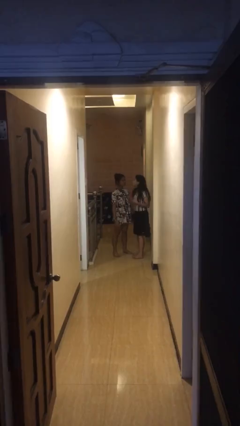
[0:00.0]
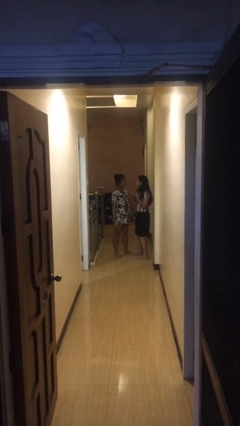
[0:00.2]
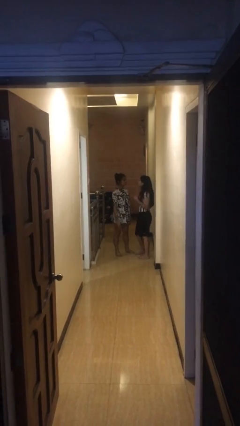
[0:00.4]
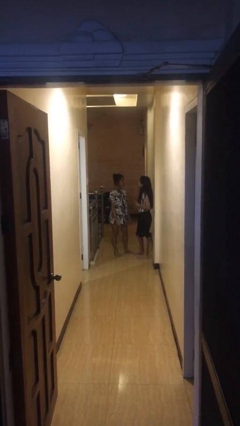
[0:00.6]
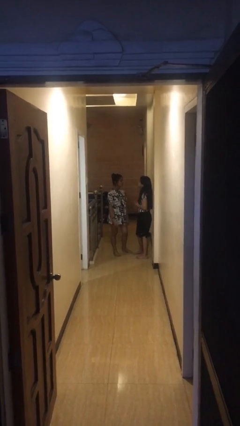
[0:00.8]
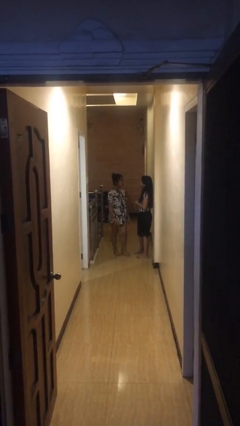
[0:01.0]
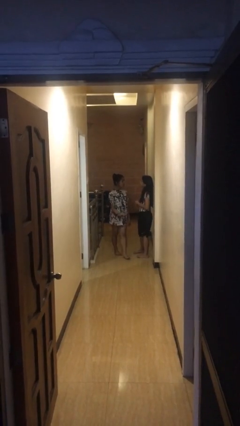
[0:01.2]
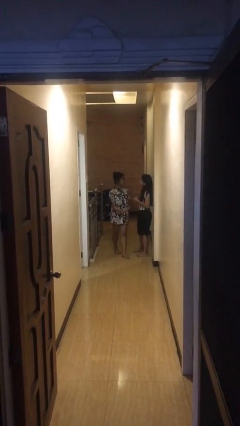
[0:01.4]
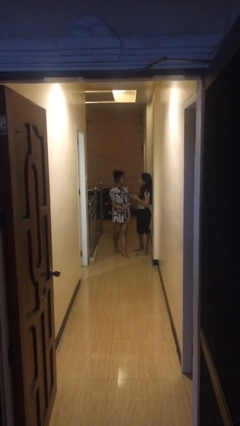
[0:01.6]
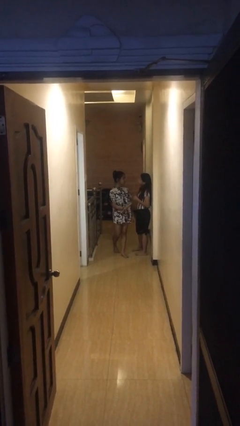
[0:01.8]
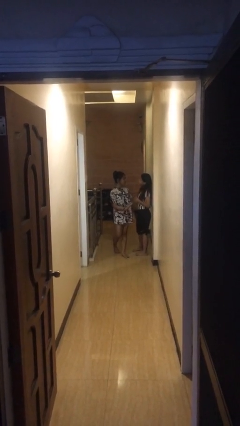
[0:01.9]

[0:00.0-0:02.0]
person talks to person

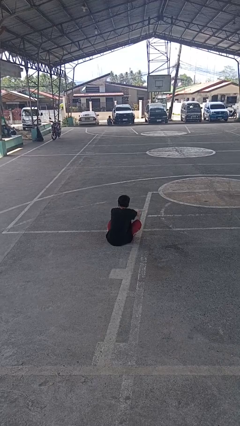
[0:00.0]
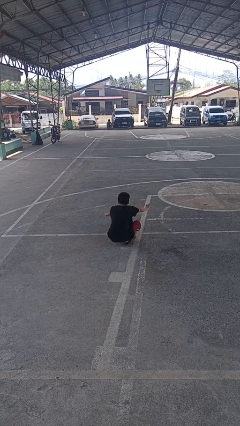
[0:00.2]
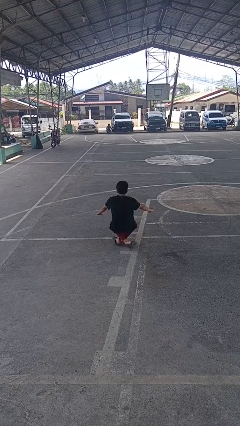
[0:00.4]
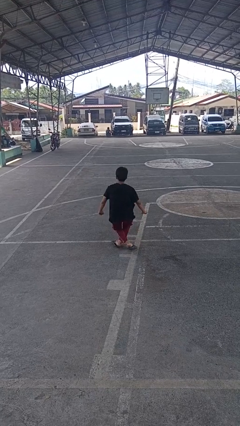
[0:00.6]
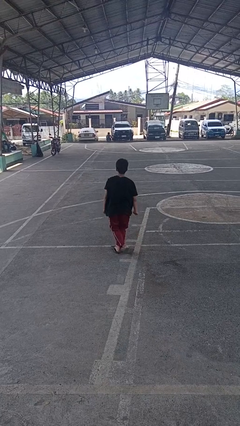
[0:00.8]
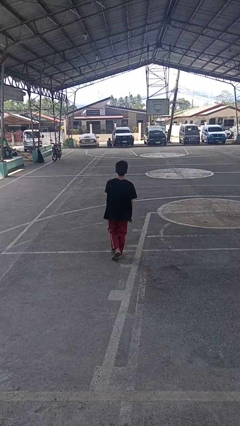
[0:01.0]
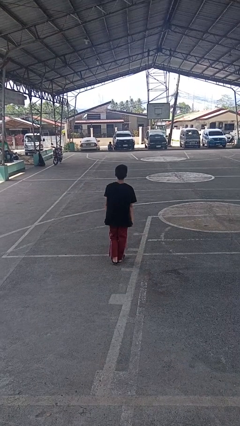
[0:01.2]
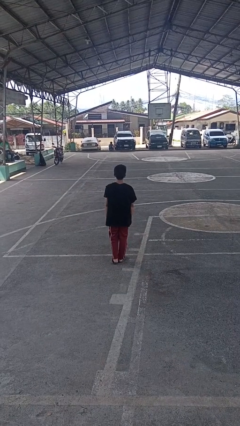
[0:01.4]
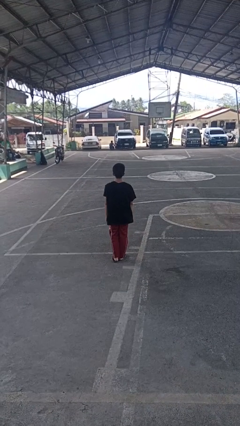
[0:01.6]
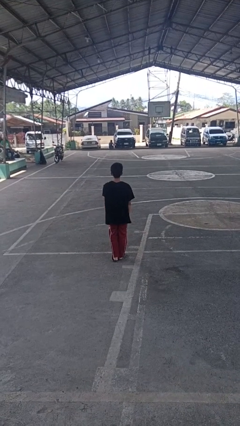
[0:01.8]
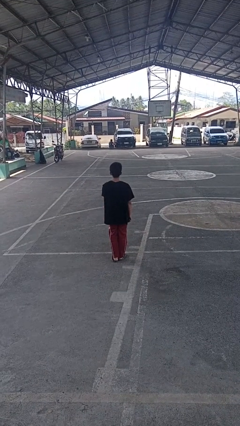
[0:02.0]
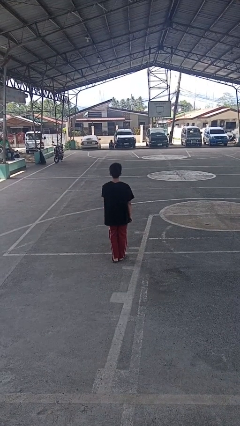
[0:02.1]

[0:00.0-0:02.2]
person stands up from floor

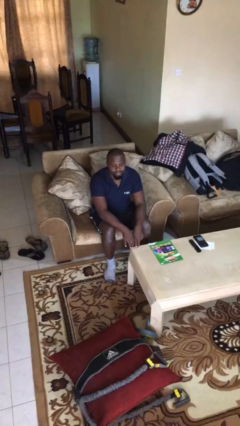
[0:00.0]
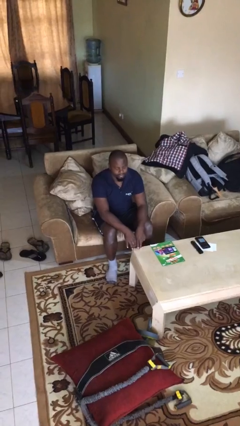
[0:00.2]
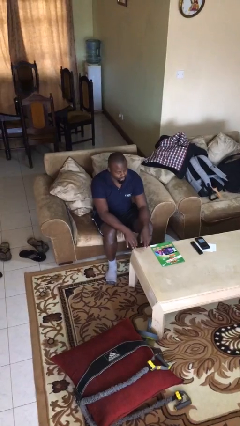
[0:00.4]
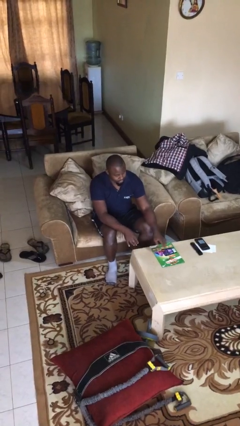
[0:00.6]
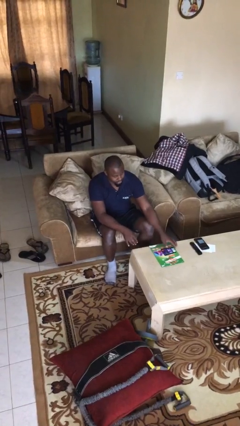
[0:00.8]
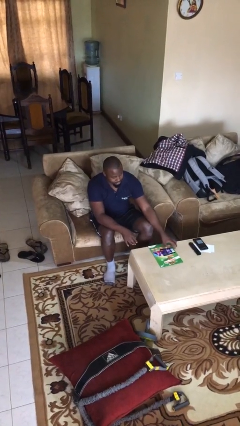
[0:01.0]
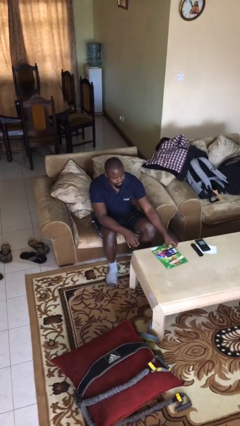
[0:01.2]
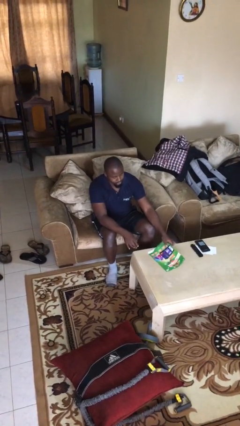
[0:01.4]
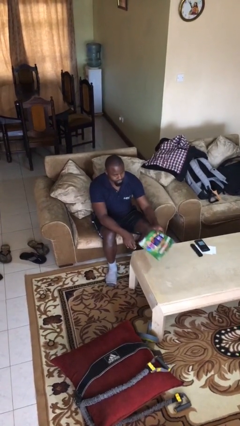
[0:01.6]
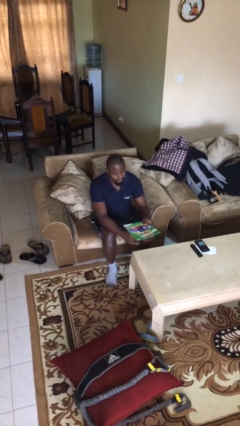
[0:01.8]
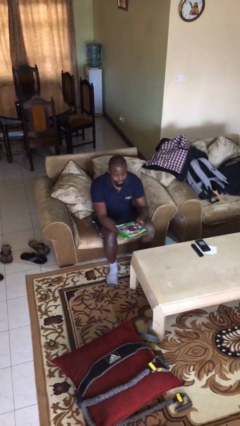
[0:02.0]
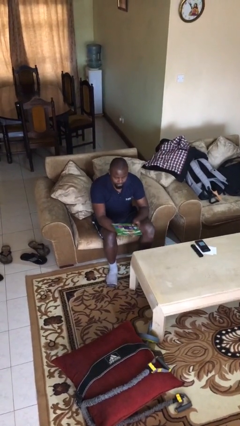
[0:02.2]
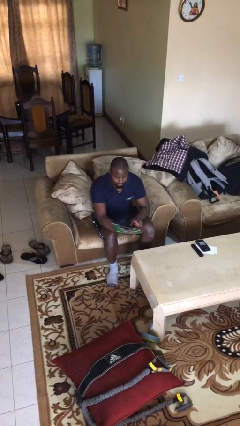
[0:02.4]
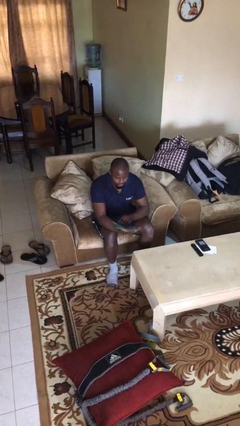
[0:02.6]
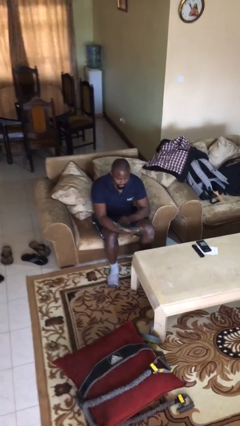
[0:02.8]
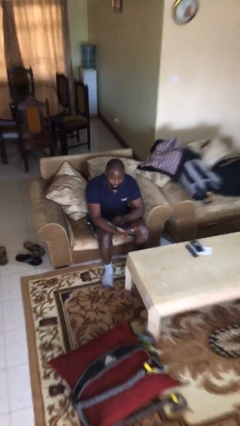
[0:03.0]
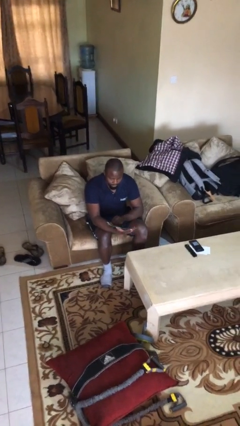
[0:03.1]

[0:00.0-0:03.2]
person picks up object from table

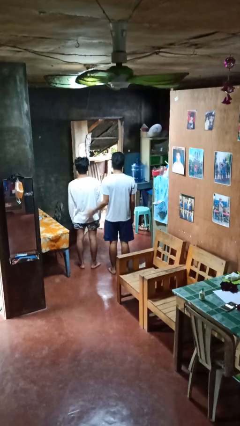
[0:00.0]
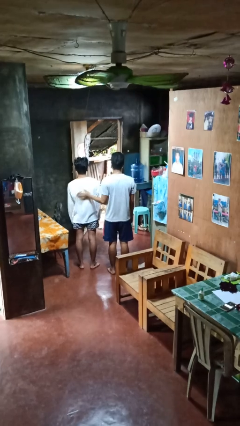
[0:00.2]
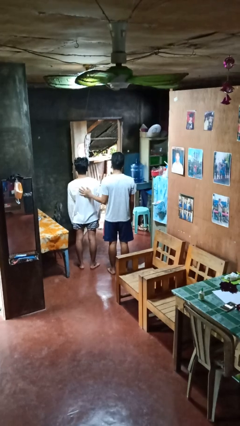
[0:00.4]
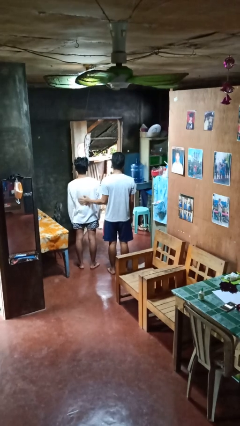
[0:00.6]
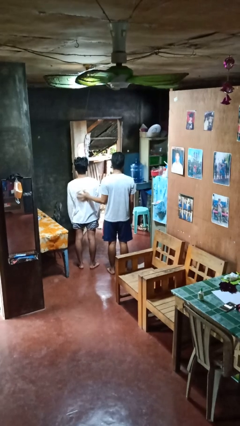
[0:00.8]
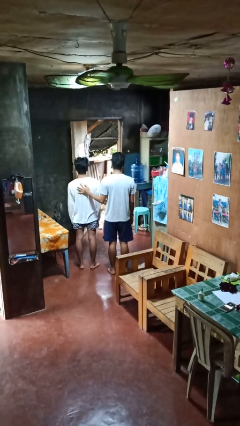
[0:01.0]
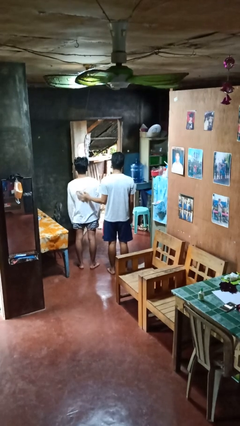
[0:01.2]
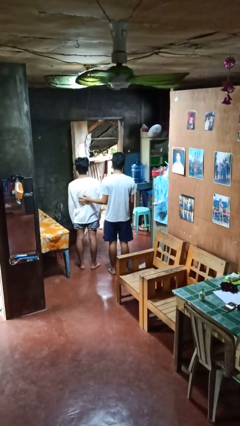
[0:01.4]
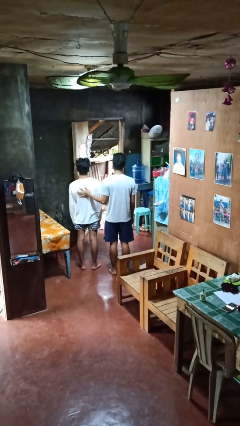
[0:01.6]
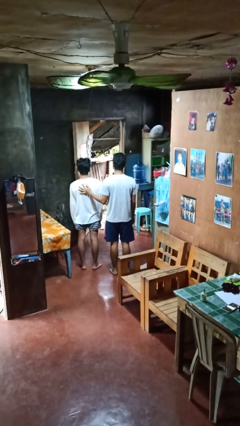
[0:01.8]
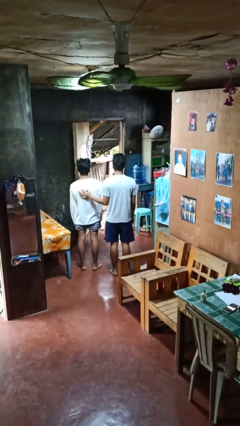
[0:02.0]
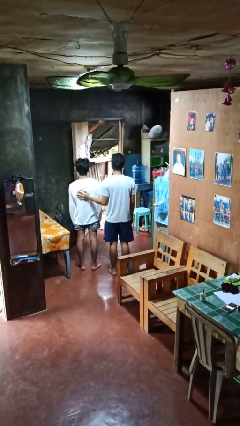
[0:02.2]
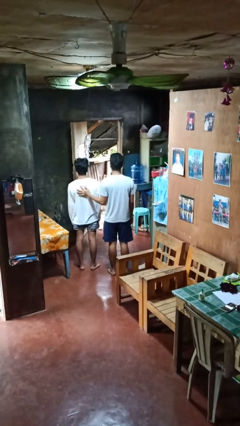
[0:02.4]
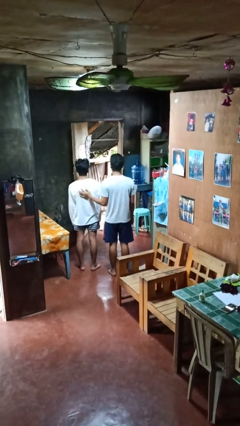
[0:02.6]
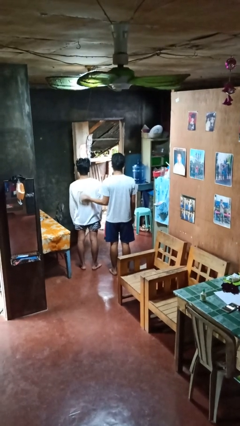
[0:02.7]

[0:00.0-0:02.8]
person touches back of person

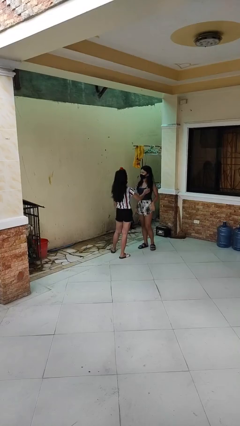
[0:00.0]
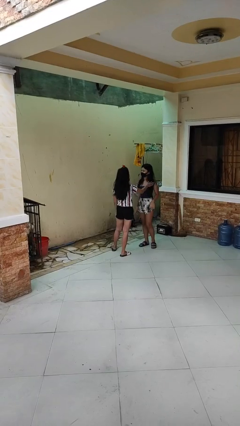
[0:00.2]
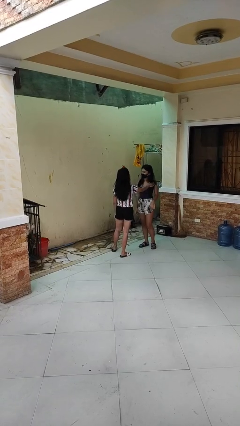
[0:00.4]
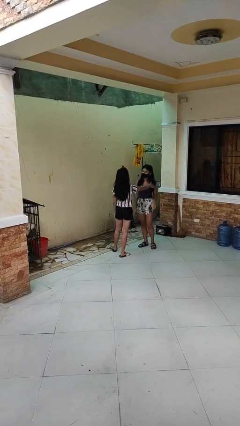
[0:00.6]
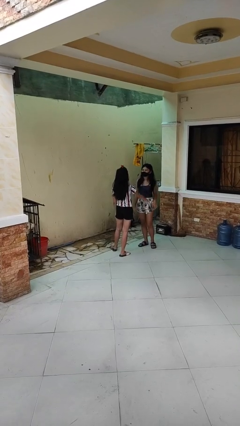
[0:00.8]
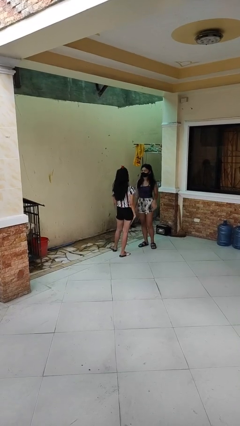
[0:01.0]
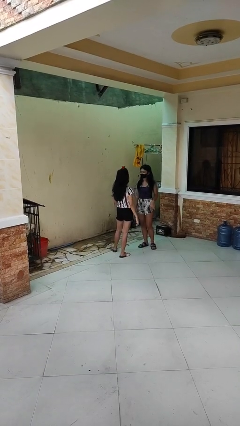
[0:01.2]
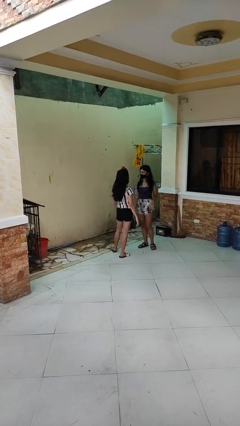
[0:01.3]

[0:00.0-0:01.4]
person shoves person

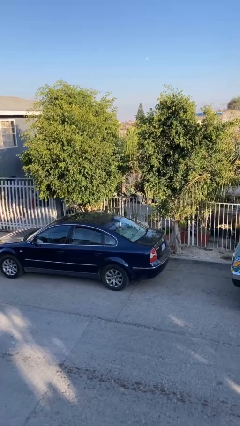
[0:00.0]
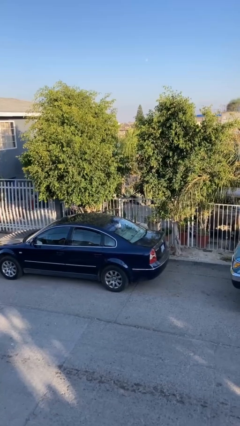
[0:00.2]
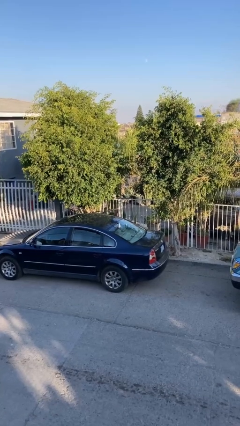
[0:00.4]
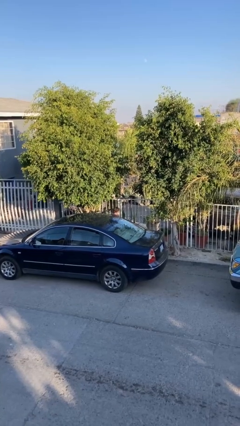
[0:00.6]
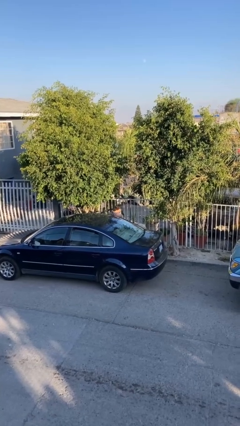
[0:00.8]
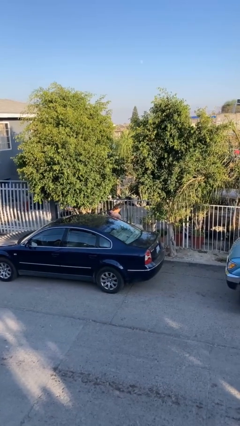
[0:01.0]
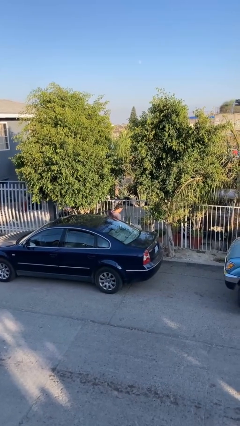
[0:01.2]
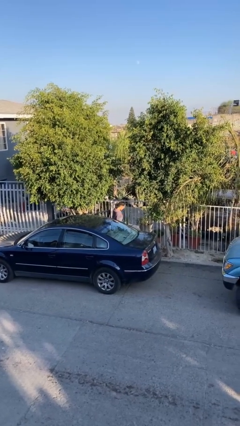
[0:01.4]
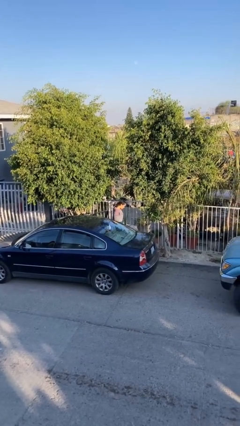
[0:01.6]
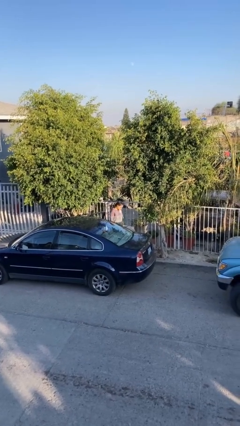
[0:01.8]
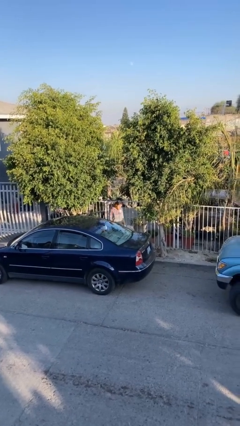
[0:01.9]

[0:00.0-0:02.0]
person exits car

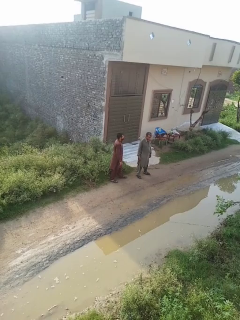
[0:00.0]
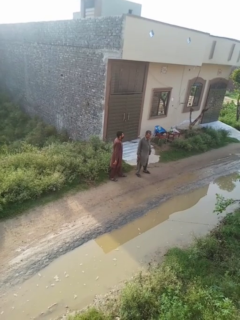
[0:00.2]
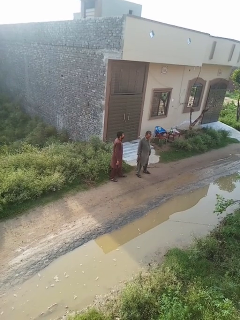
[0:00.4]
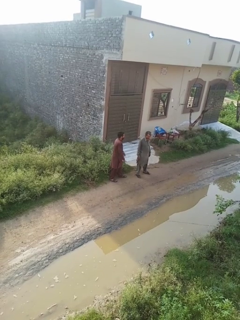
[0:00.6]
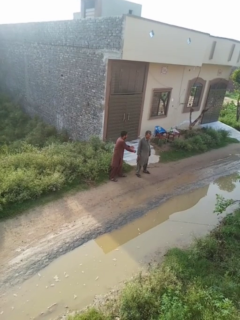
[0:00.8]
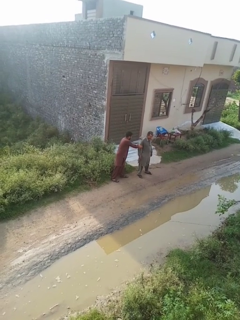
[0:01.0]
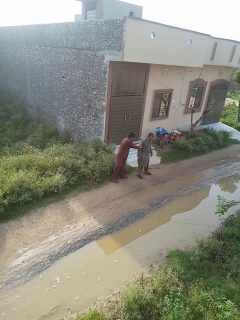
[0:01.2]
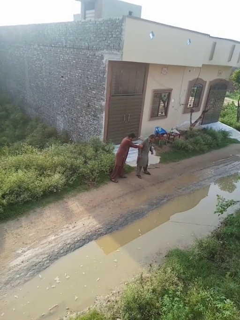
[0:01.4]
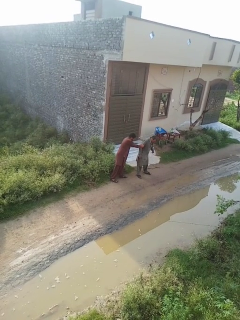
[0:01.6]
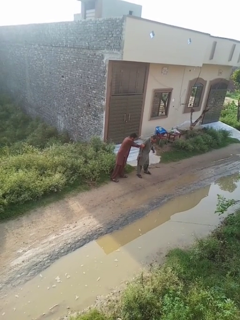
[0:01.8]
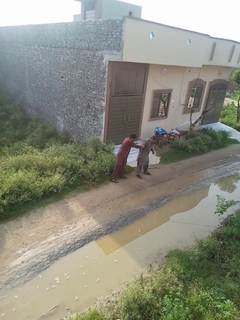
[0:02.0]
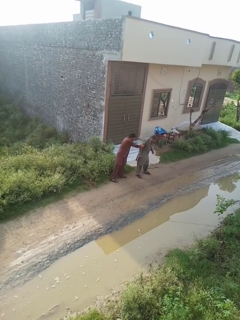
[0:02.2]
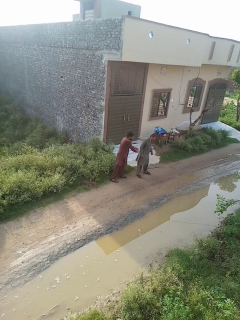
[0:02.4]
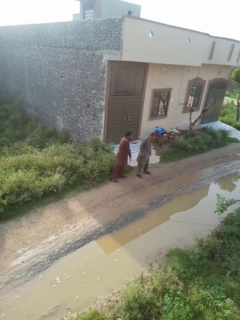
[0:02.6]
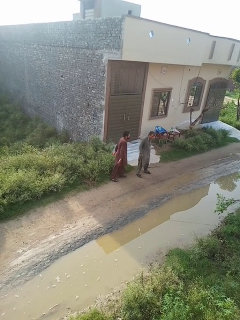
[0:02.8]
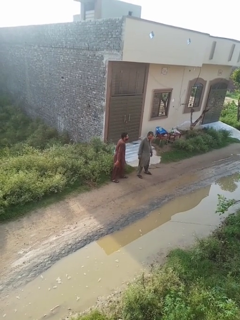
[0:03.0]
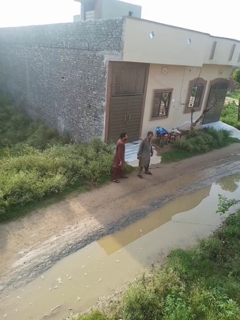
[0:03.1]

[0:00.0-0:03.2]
person grabs person by bicep

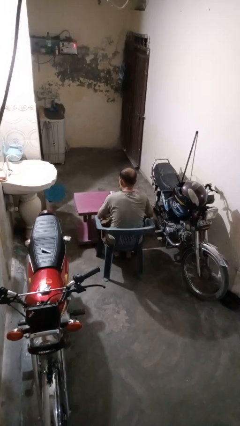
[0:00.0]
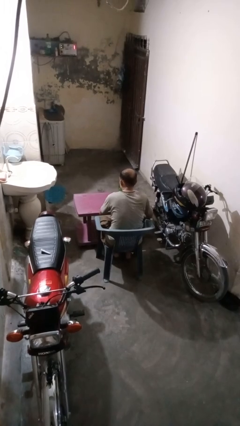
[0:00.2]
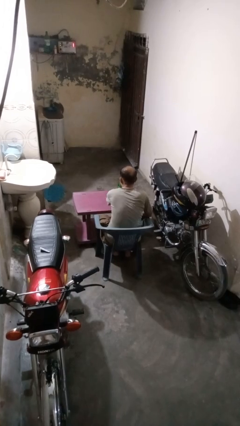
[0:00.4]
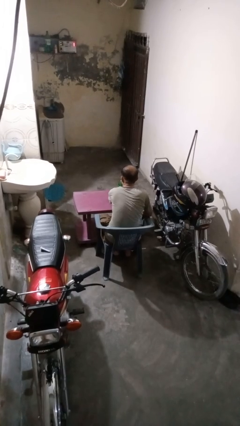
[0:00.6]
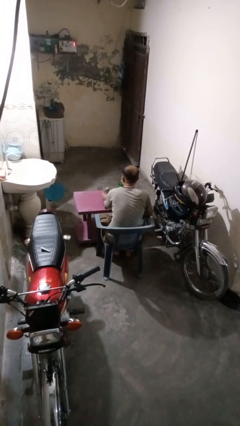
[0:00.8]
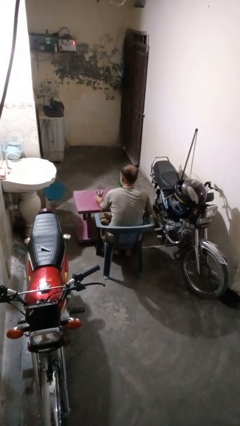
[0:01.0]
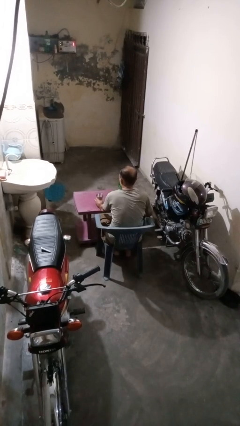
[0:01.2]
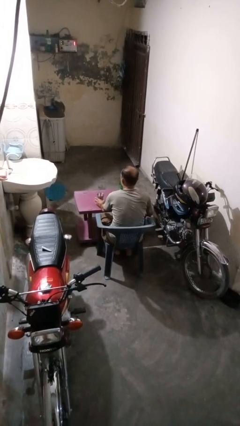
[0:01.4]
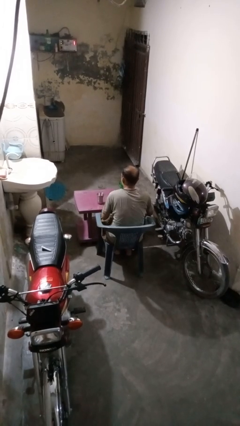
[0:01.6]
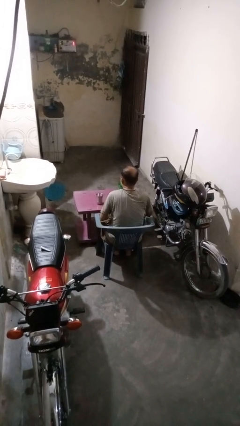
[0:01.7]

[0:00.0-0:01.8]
person sets upright glass
